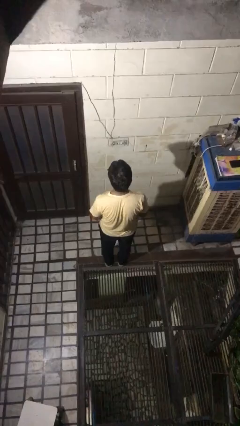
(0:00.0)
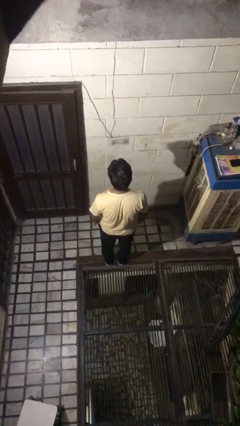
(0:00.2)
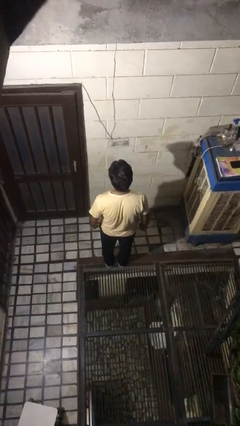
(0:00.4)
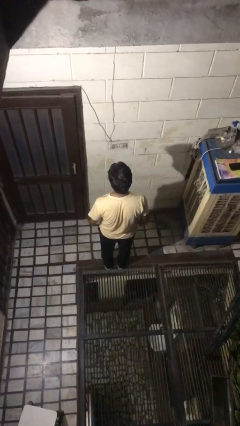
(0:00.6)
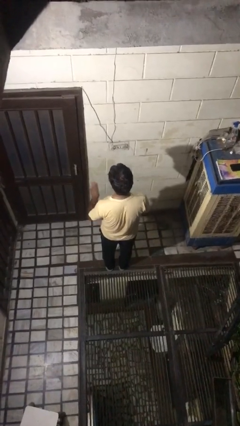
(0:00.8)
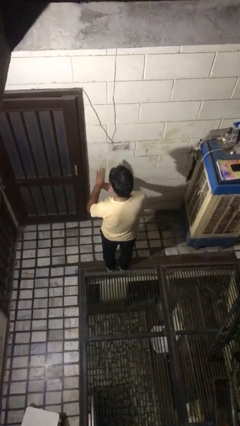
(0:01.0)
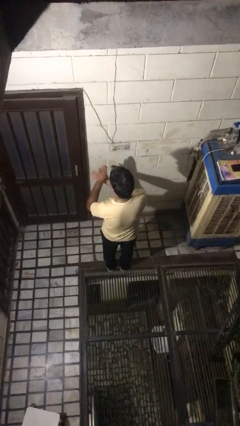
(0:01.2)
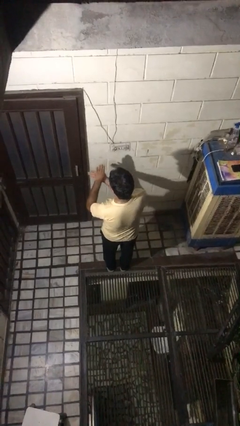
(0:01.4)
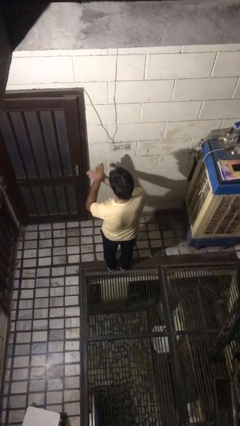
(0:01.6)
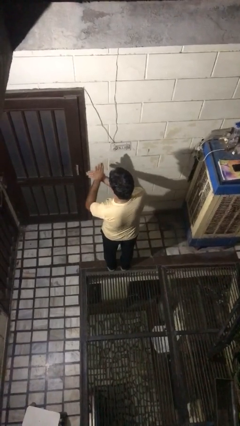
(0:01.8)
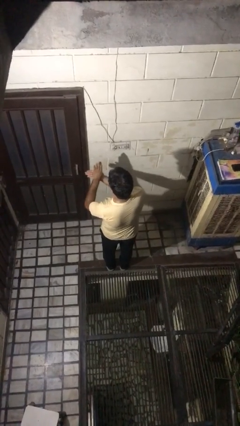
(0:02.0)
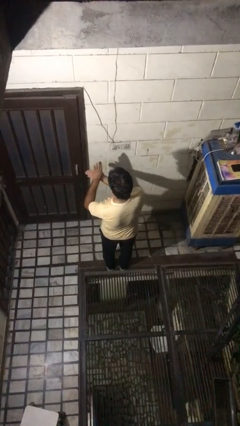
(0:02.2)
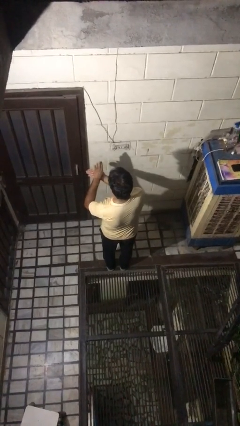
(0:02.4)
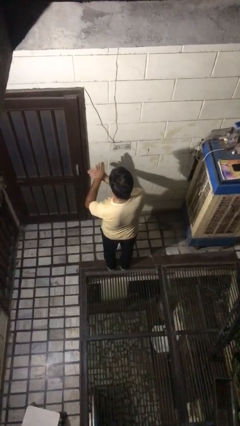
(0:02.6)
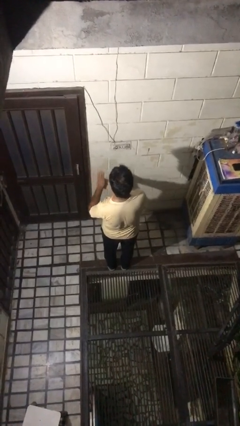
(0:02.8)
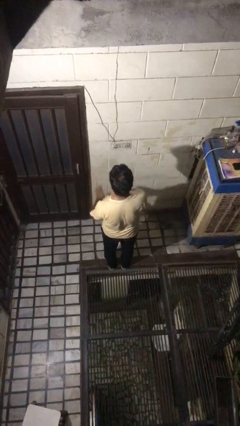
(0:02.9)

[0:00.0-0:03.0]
person gestures number four

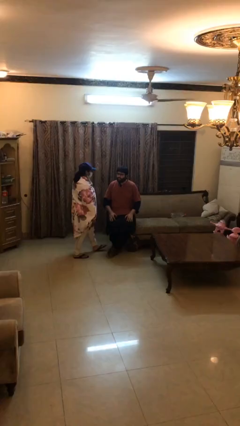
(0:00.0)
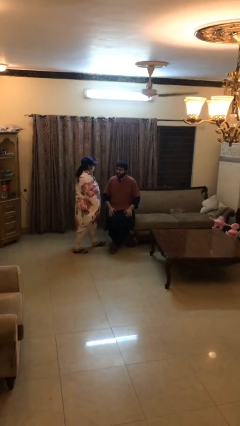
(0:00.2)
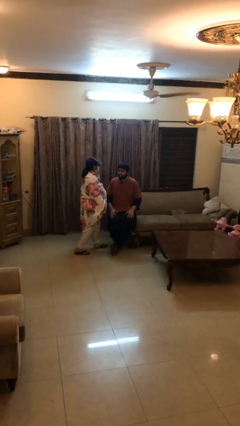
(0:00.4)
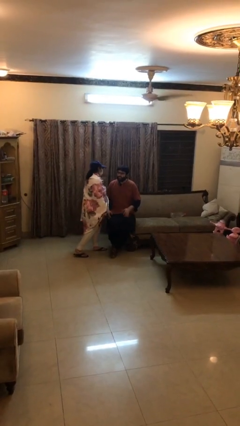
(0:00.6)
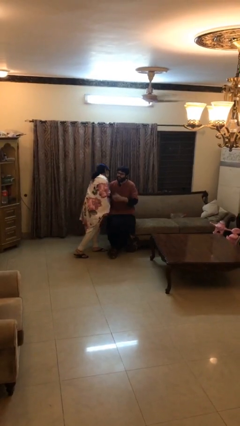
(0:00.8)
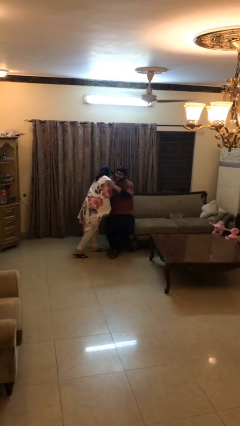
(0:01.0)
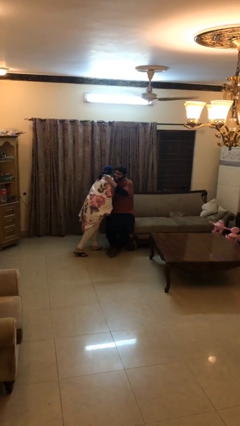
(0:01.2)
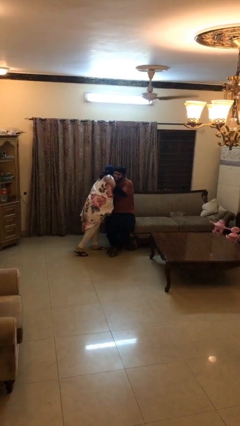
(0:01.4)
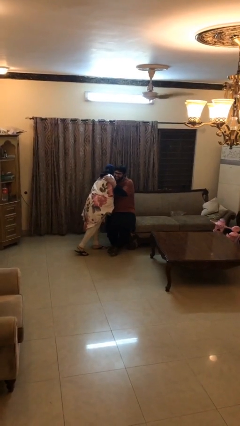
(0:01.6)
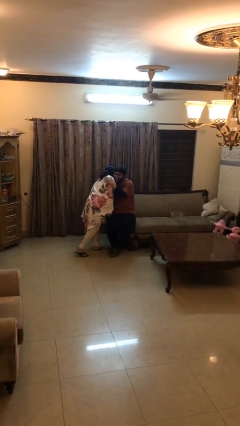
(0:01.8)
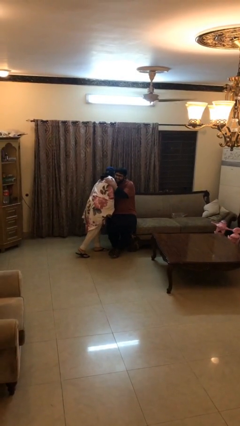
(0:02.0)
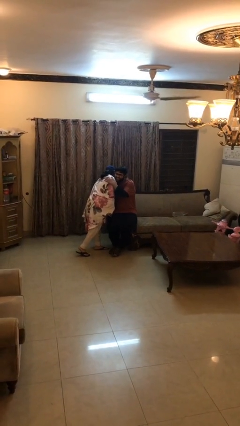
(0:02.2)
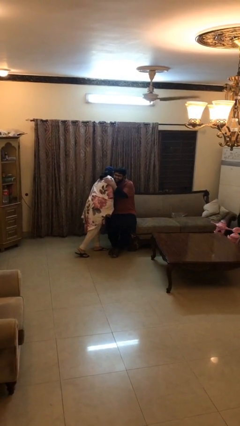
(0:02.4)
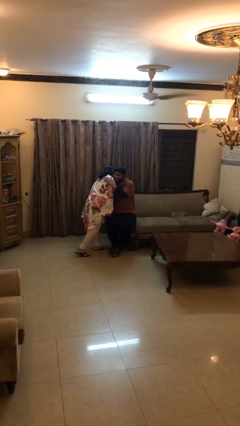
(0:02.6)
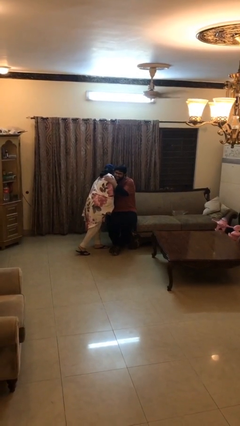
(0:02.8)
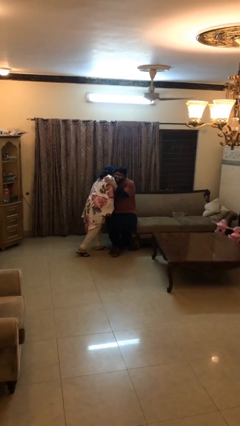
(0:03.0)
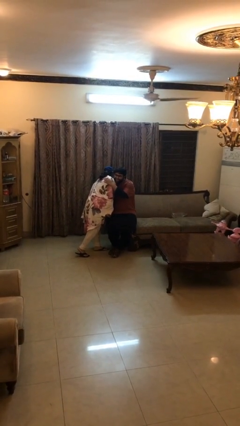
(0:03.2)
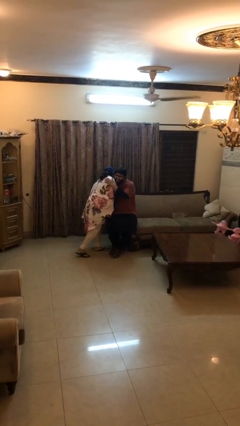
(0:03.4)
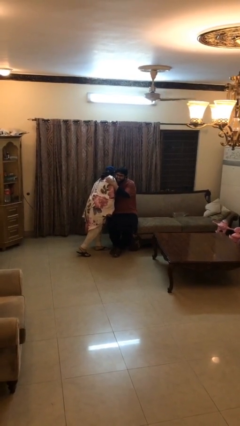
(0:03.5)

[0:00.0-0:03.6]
person embraces person

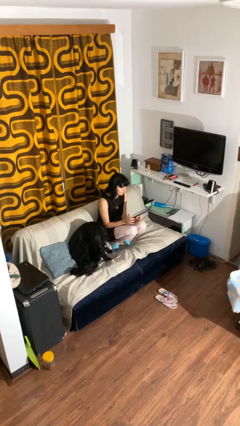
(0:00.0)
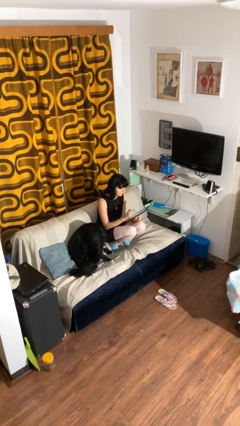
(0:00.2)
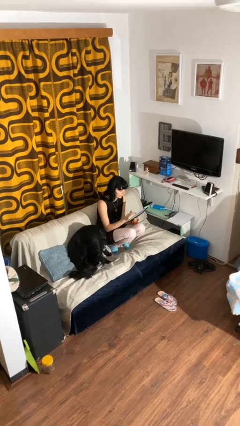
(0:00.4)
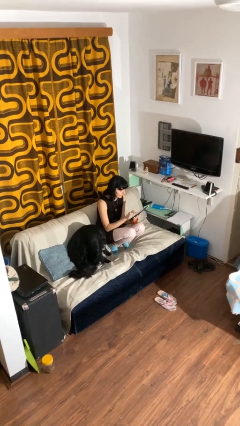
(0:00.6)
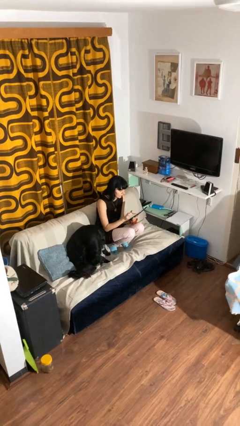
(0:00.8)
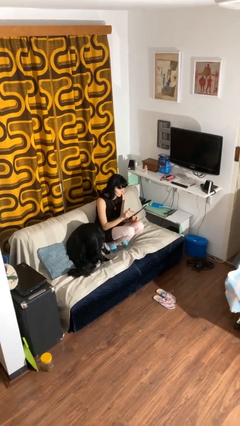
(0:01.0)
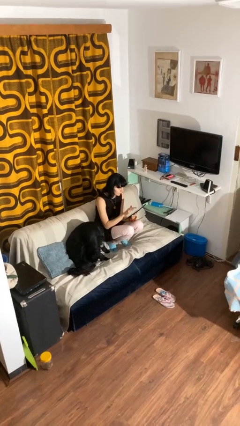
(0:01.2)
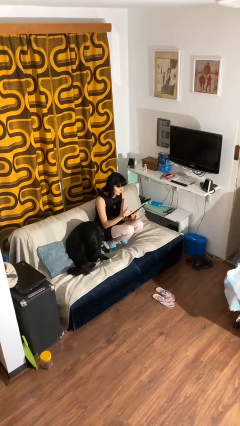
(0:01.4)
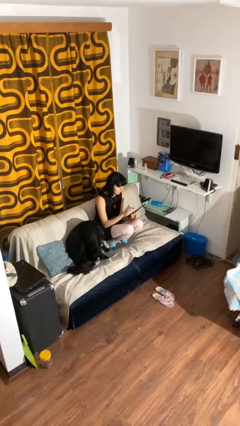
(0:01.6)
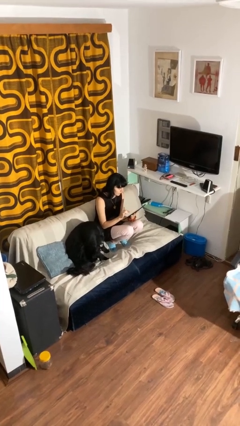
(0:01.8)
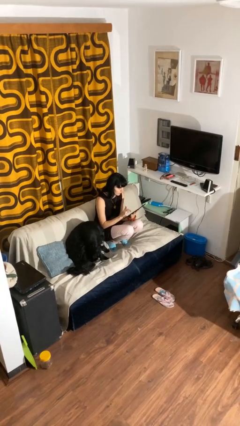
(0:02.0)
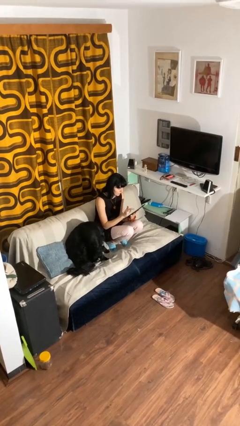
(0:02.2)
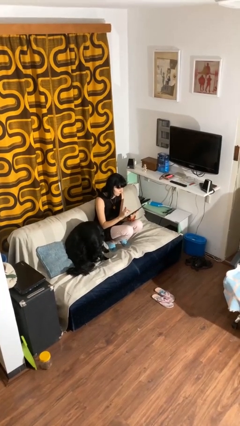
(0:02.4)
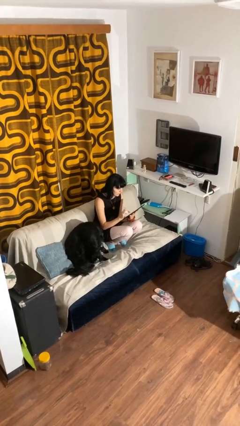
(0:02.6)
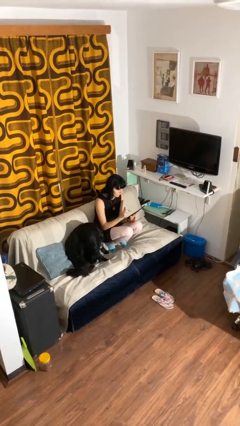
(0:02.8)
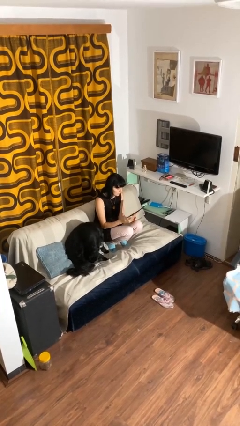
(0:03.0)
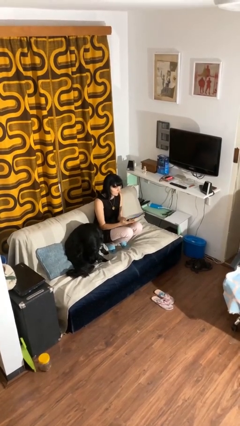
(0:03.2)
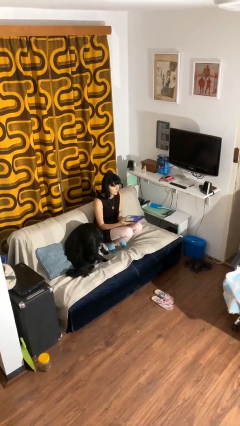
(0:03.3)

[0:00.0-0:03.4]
person interacts with tablet

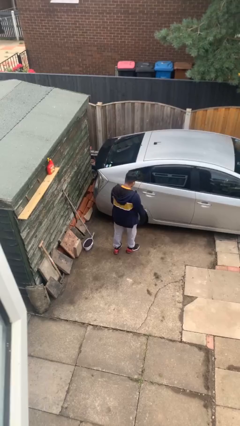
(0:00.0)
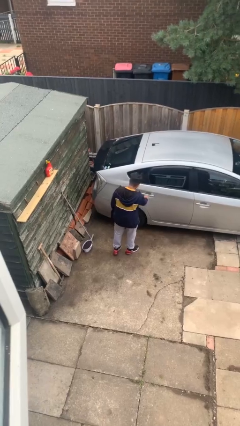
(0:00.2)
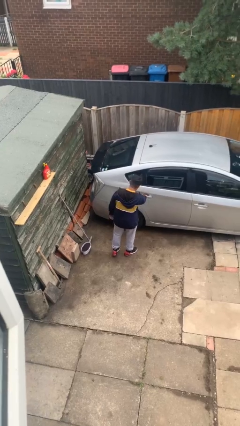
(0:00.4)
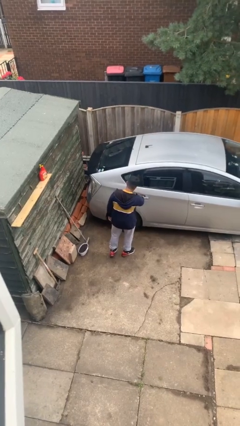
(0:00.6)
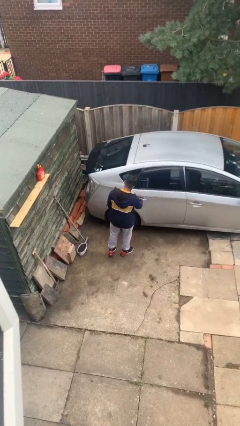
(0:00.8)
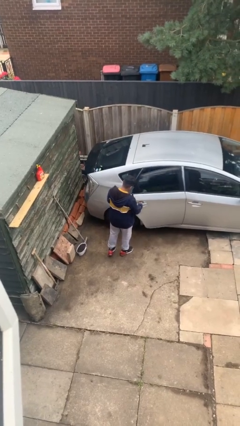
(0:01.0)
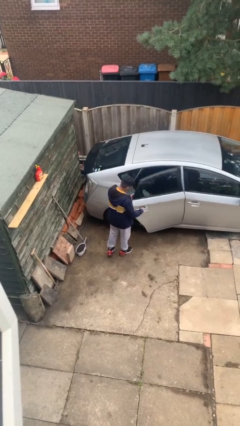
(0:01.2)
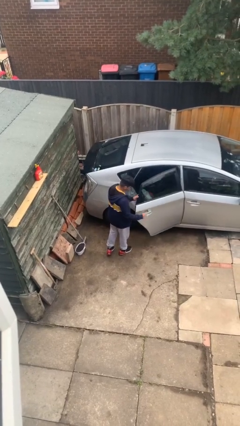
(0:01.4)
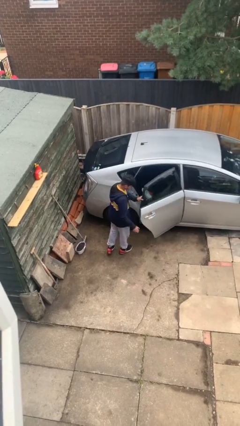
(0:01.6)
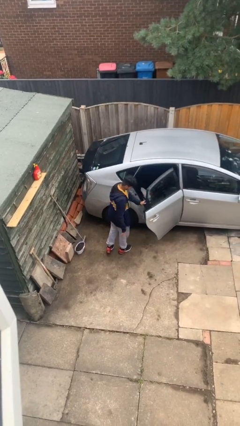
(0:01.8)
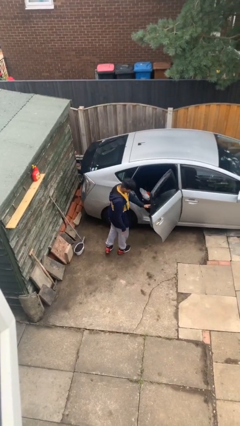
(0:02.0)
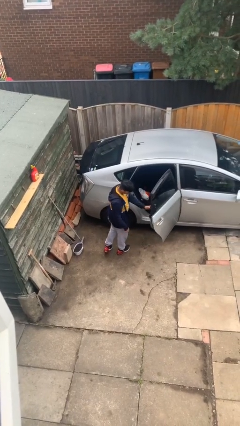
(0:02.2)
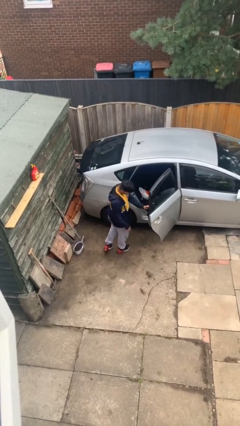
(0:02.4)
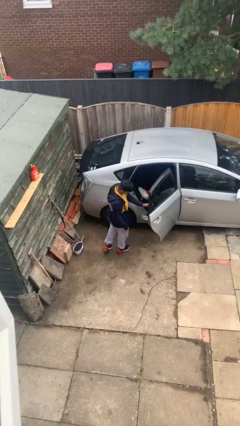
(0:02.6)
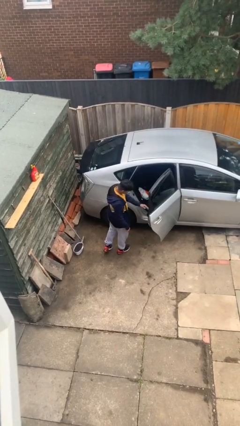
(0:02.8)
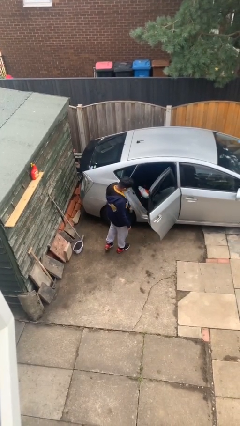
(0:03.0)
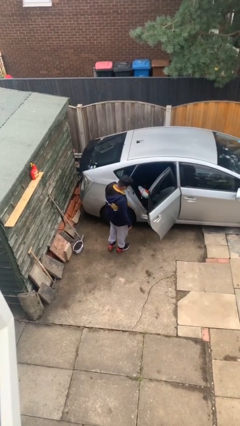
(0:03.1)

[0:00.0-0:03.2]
person opens car door

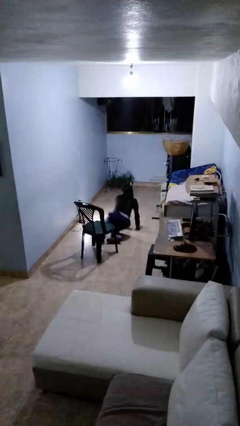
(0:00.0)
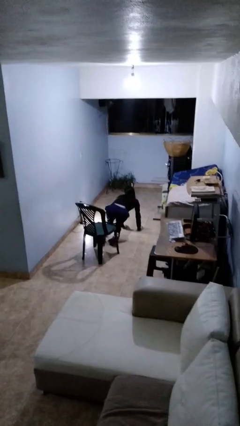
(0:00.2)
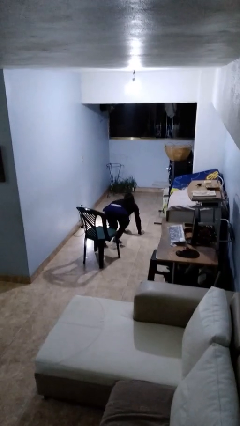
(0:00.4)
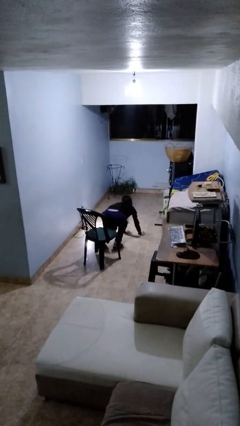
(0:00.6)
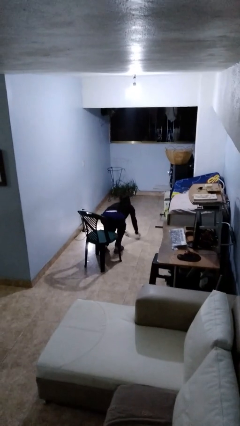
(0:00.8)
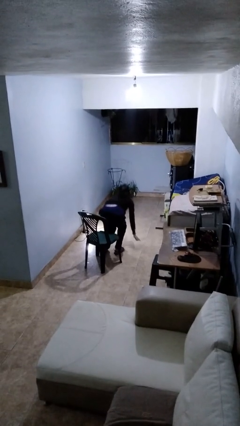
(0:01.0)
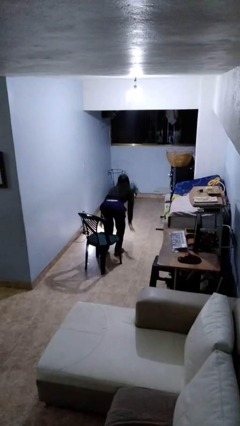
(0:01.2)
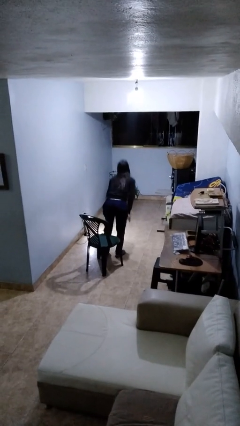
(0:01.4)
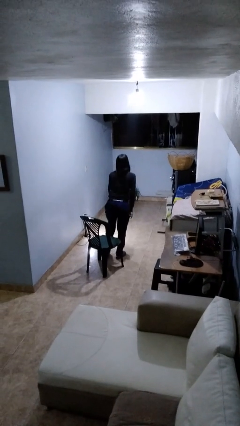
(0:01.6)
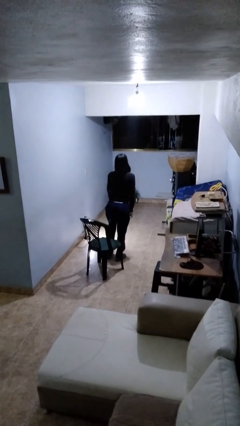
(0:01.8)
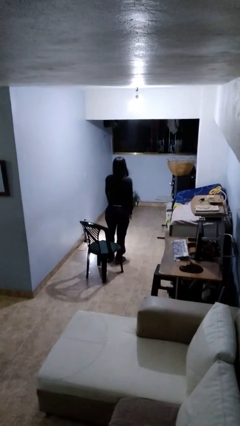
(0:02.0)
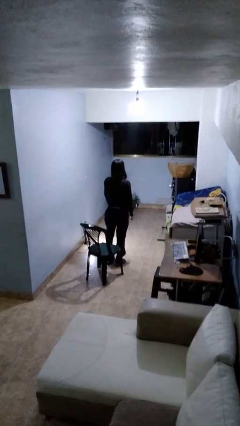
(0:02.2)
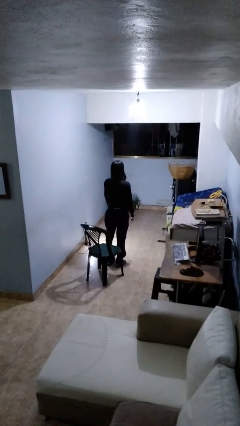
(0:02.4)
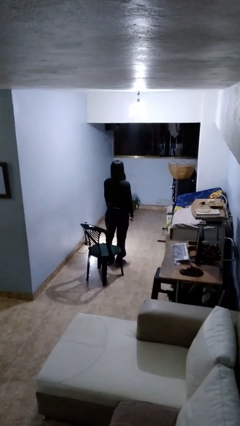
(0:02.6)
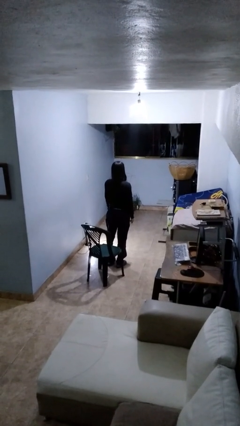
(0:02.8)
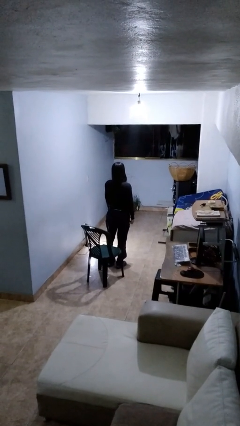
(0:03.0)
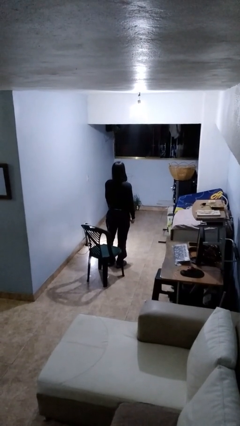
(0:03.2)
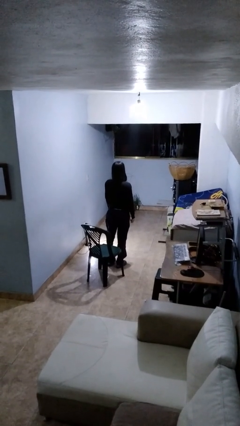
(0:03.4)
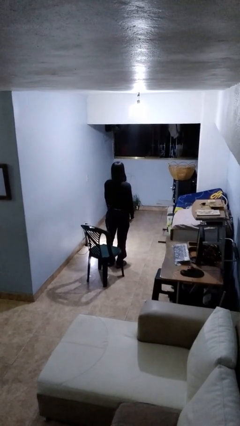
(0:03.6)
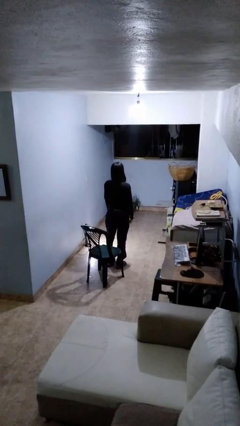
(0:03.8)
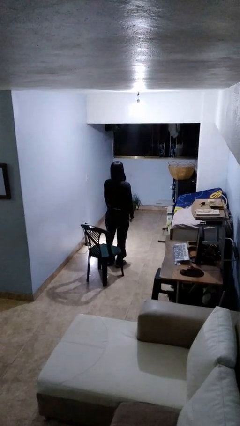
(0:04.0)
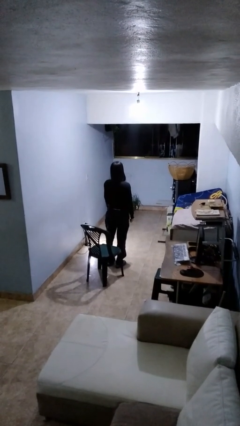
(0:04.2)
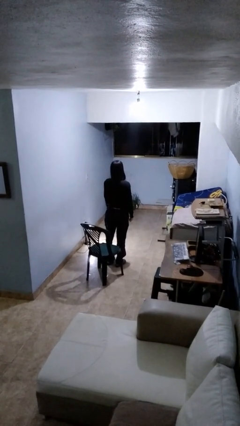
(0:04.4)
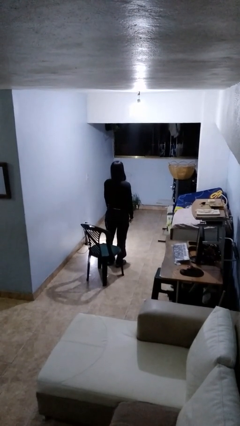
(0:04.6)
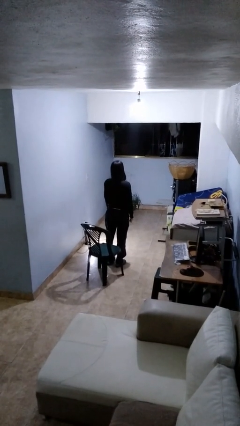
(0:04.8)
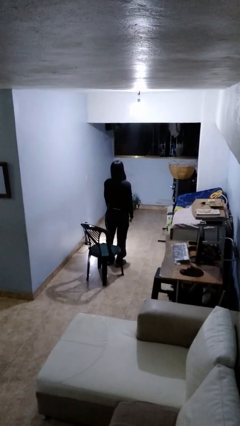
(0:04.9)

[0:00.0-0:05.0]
person stands up from floor
